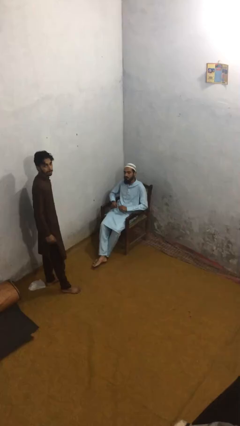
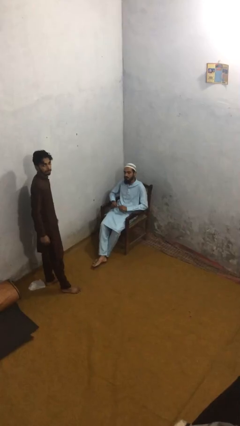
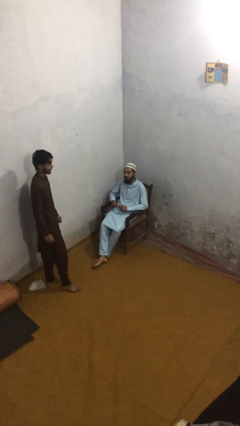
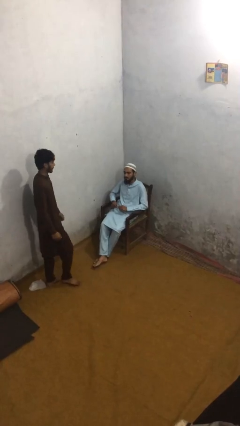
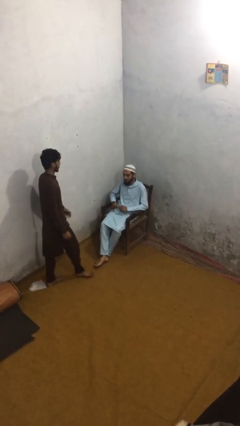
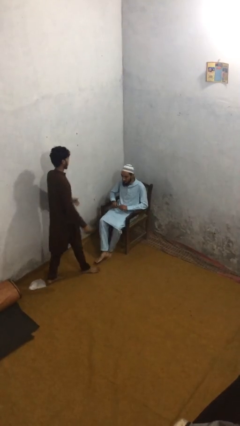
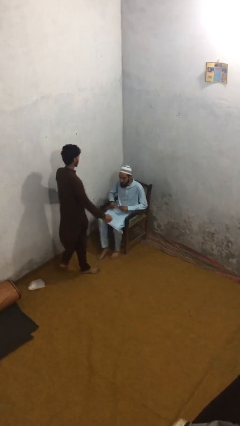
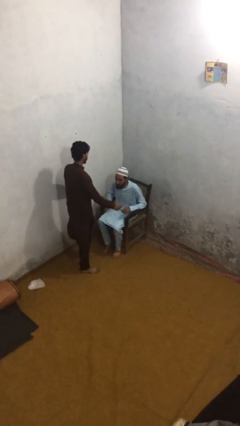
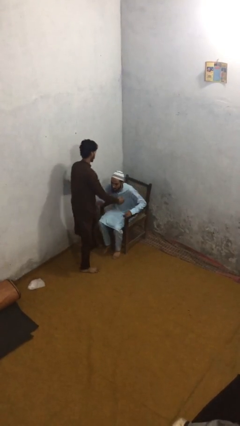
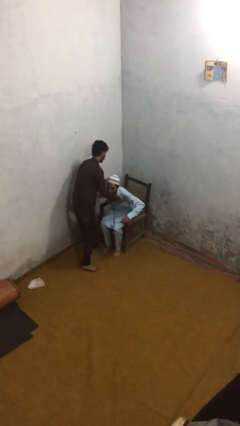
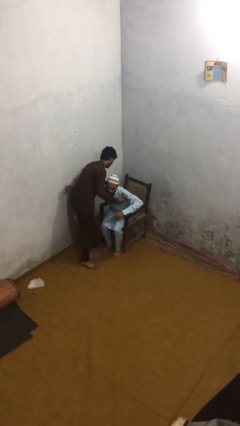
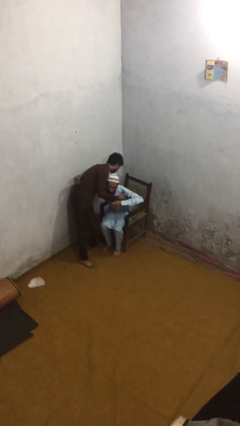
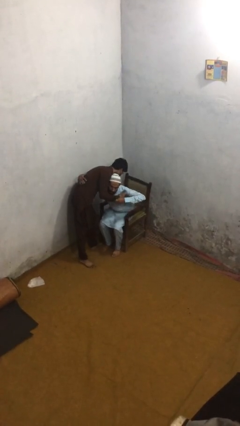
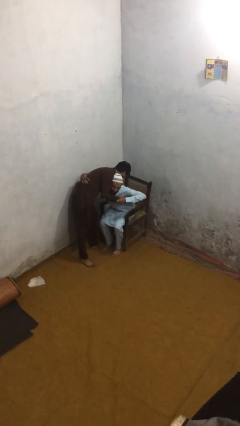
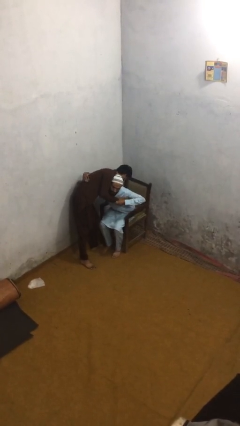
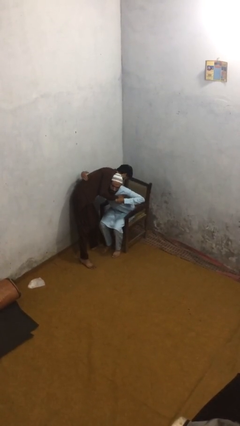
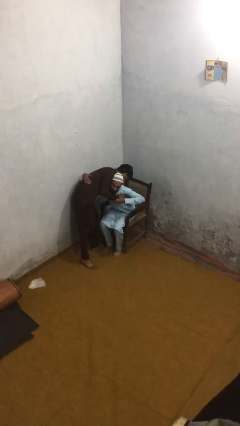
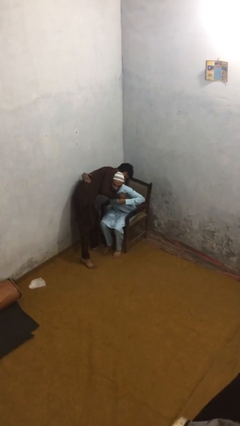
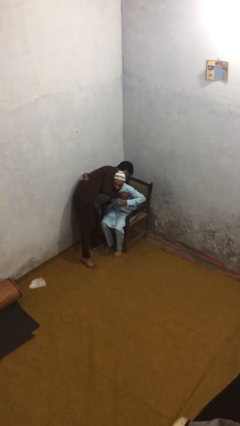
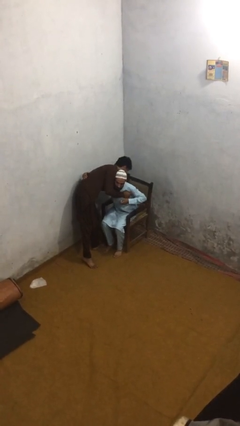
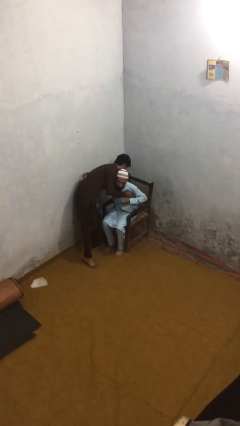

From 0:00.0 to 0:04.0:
person embraces person

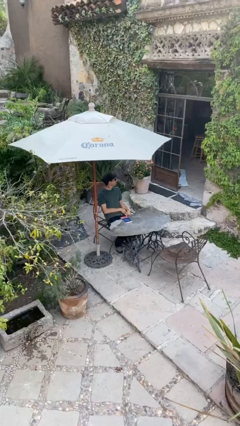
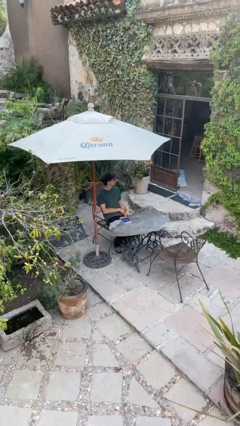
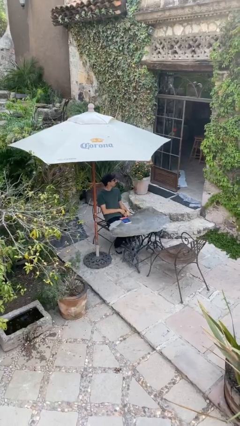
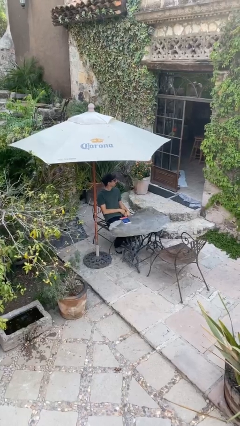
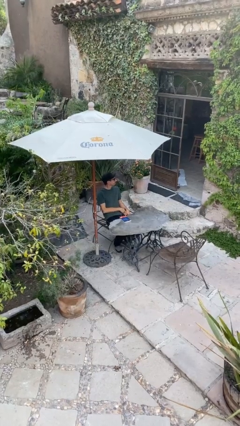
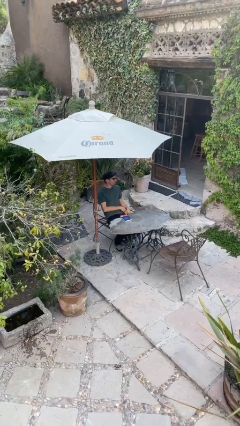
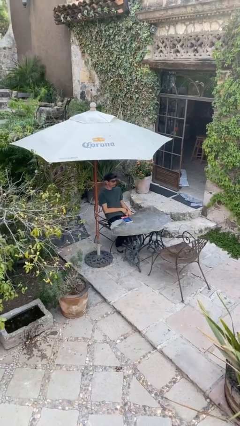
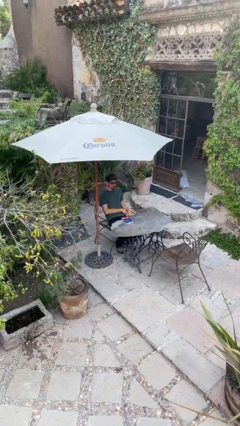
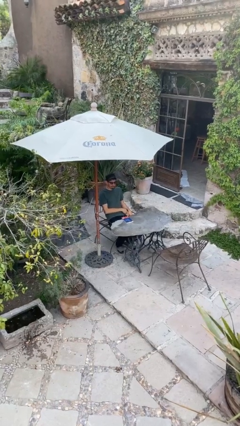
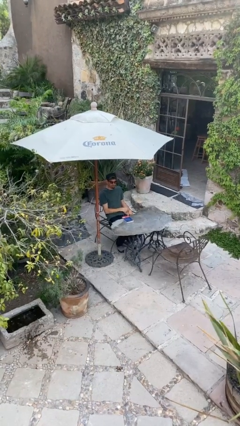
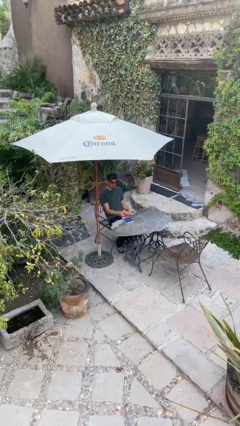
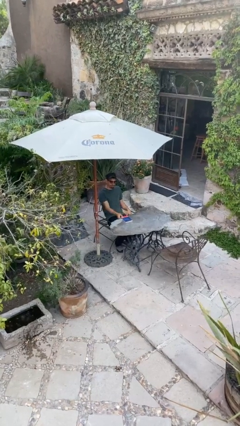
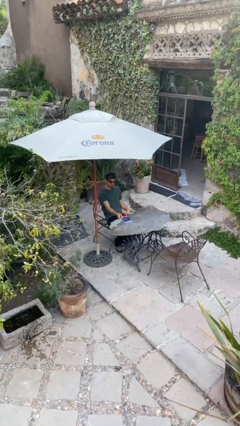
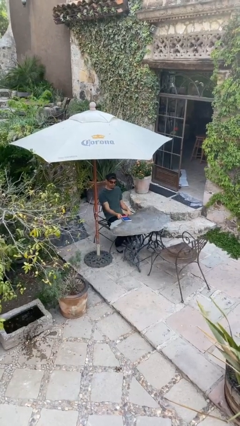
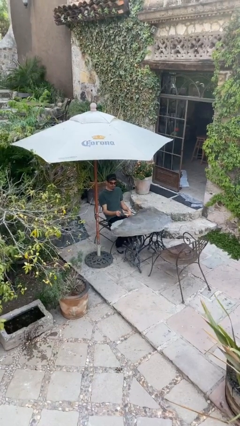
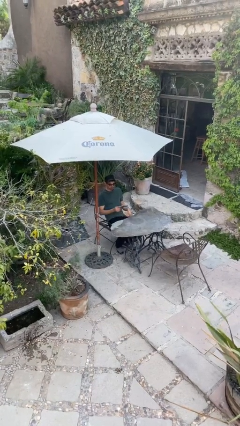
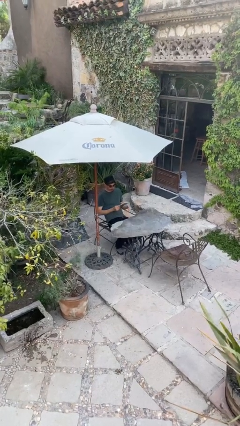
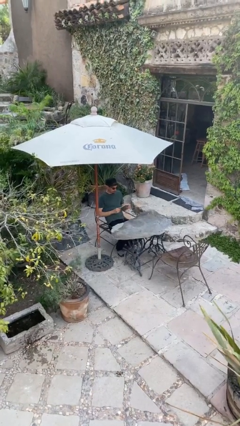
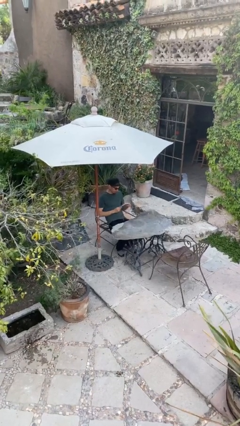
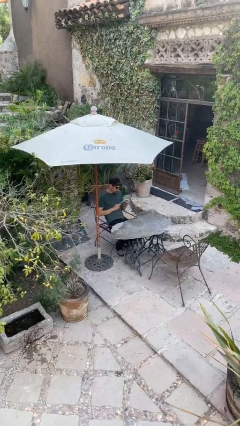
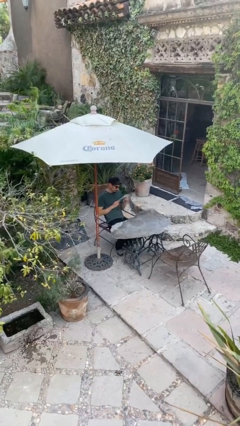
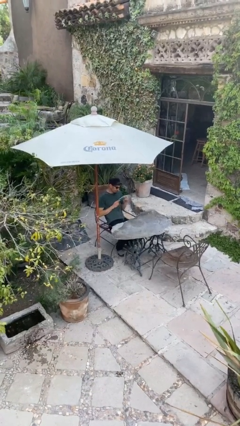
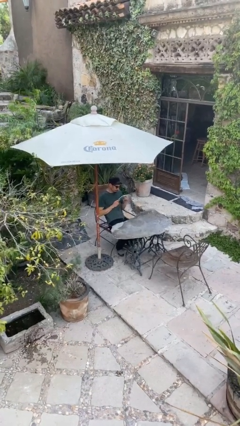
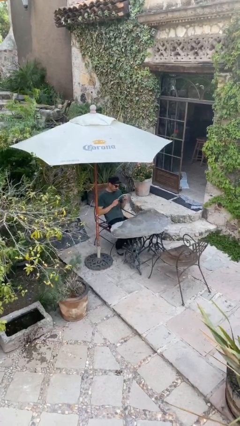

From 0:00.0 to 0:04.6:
person picks up object from table

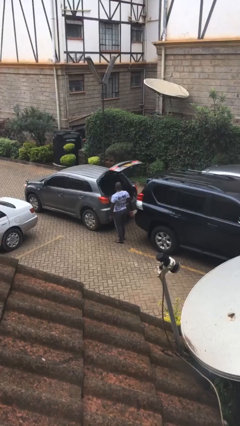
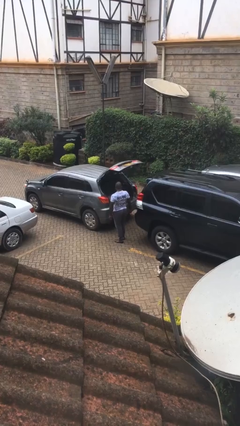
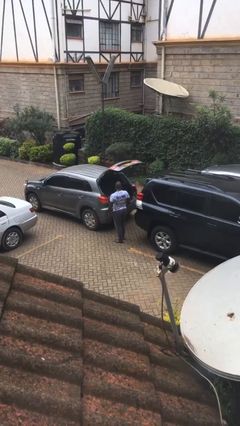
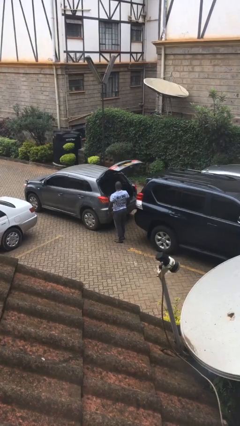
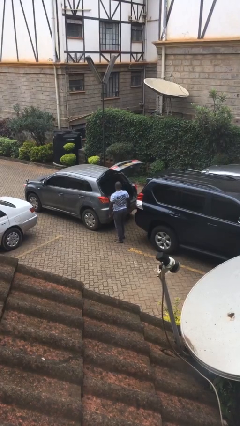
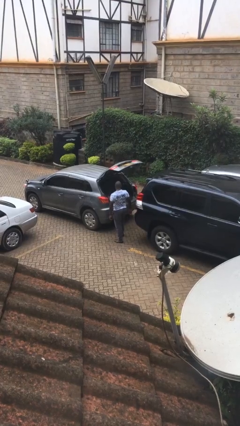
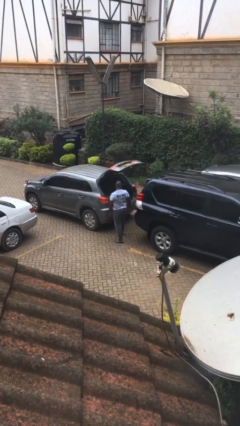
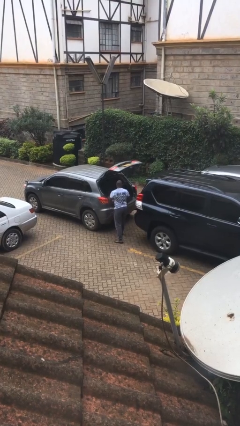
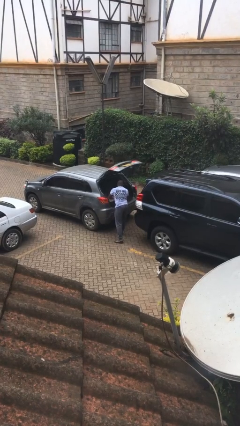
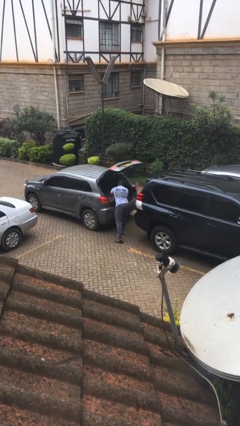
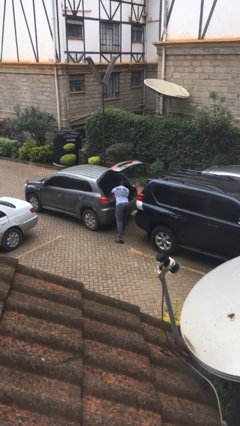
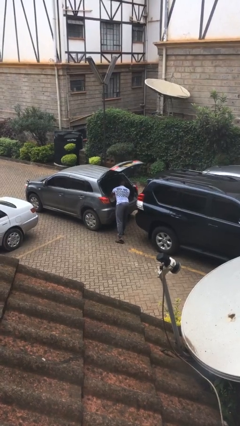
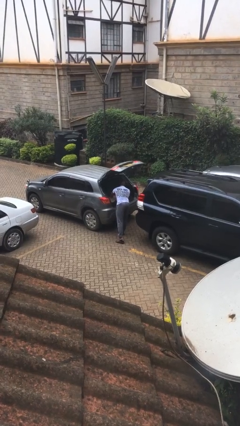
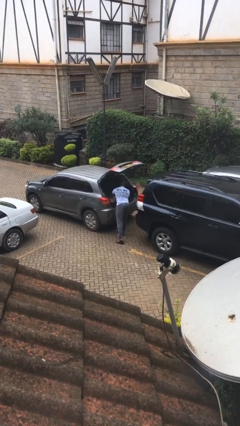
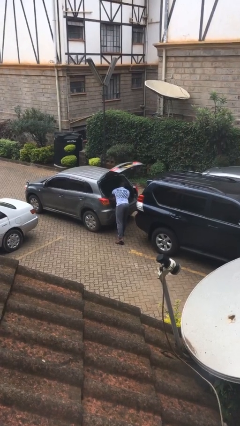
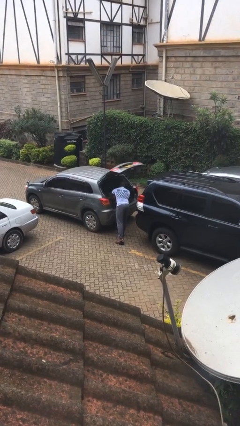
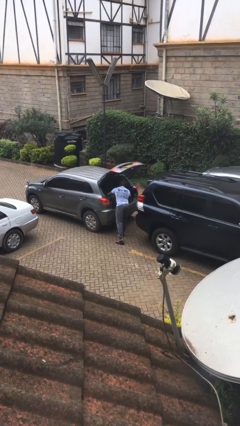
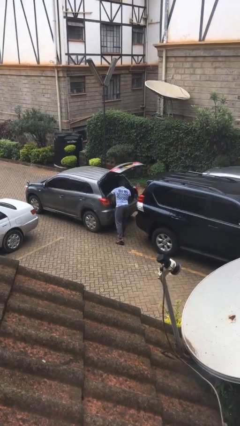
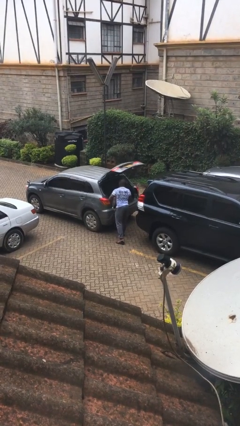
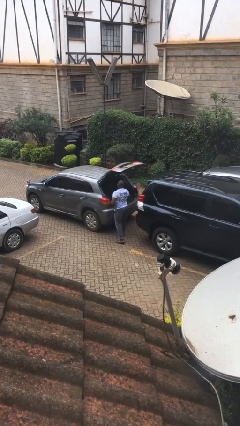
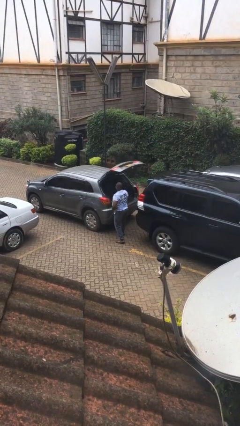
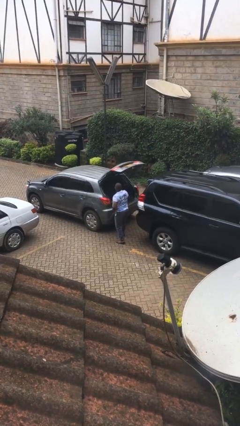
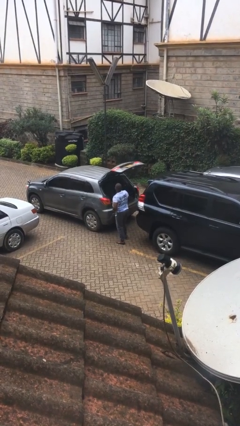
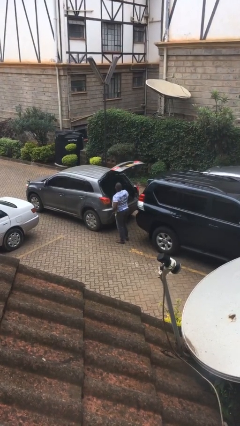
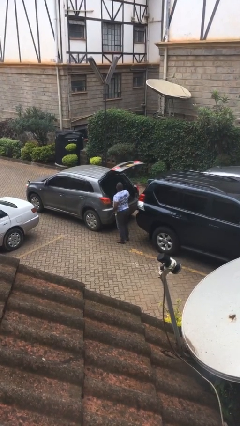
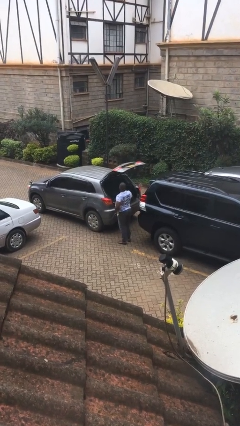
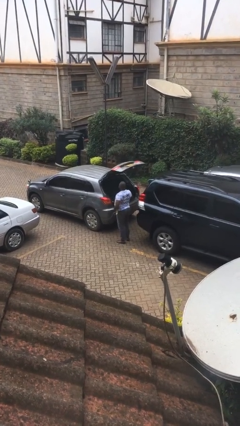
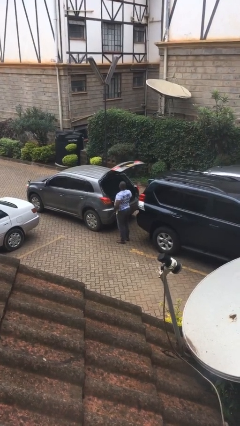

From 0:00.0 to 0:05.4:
person unloads car

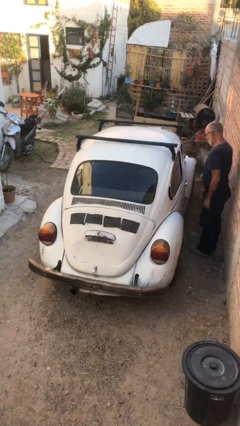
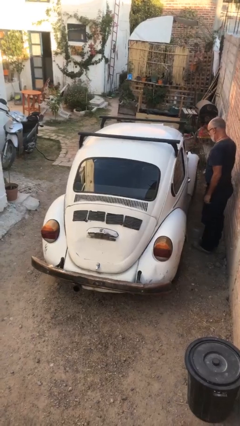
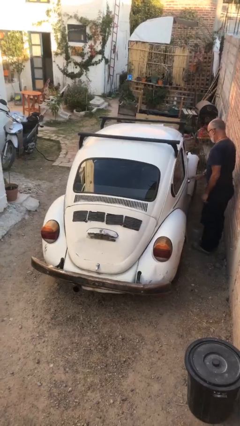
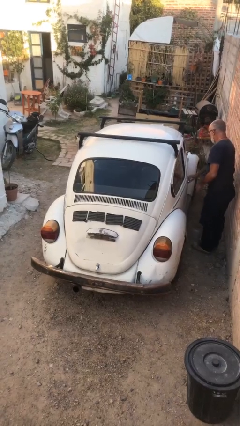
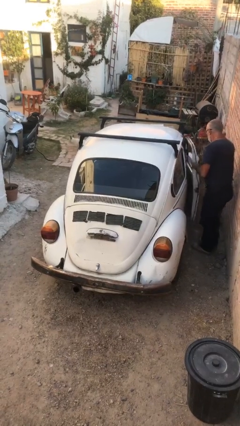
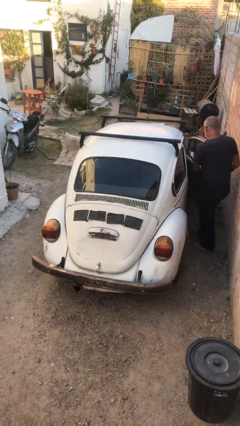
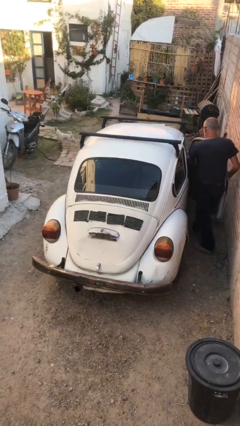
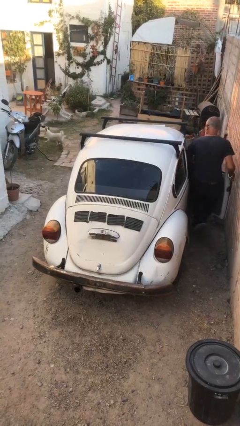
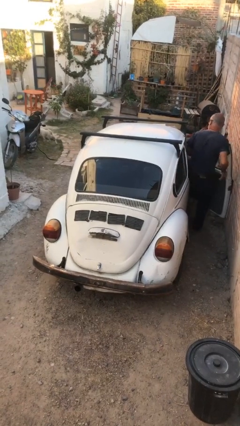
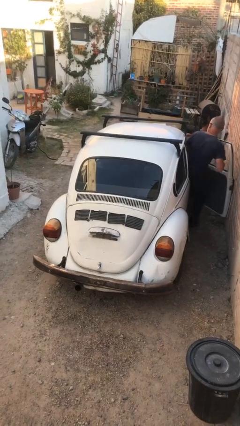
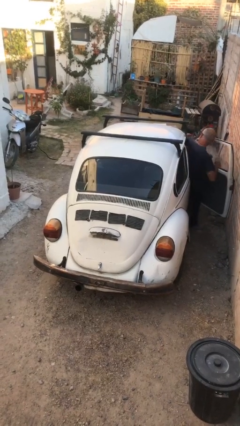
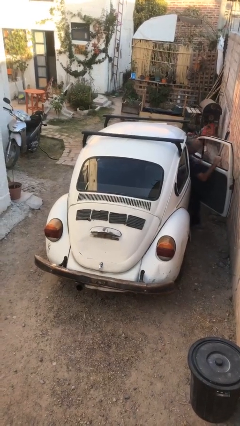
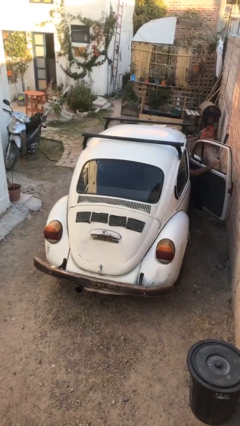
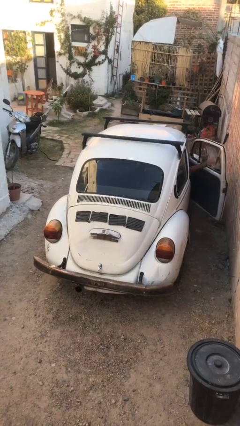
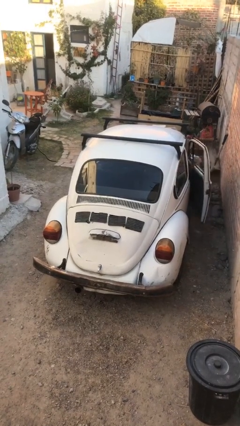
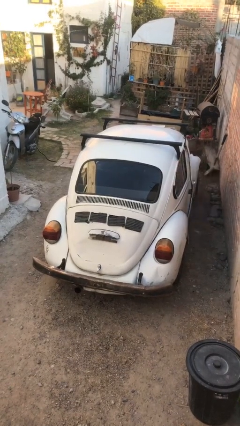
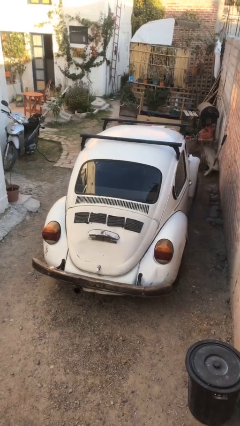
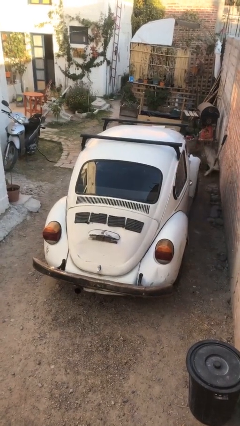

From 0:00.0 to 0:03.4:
car picks up person

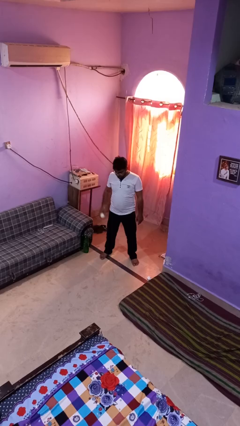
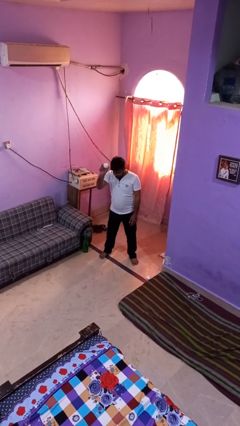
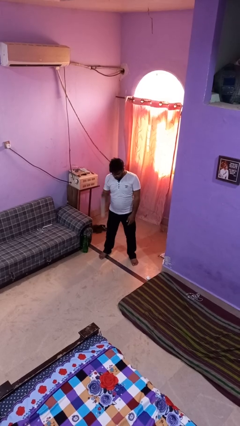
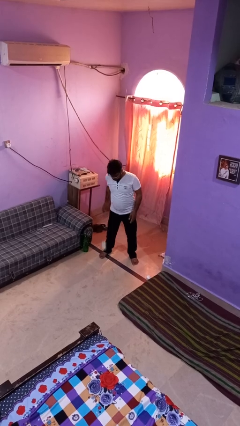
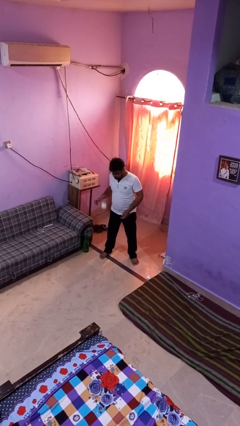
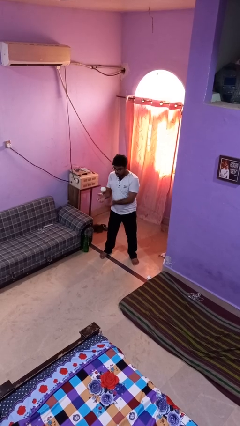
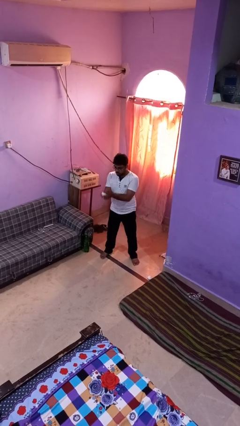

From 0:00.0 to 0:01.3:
person bounces ball on floor
